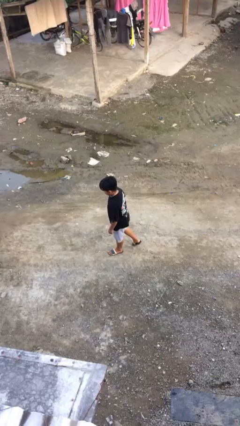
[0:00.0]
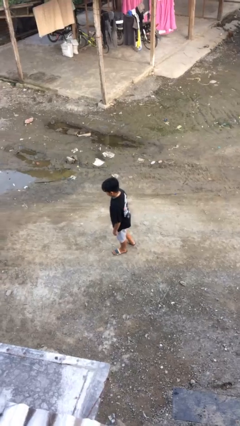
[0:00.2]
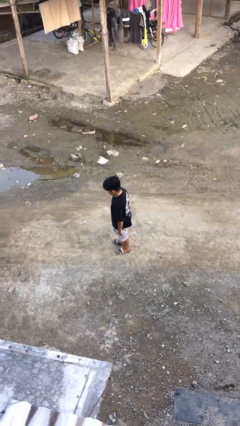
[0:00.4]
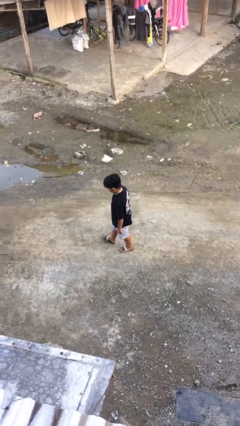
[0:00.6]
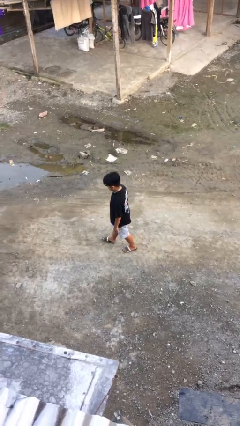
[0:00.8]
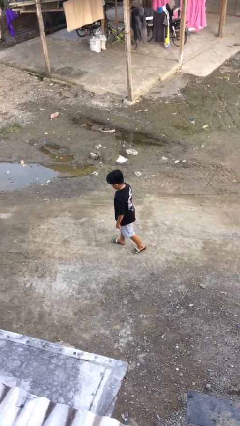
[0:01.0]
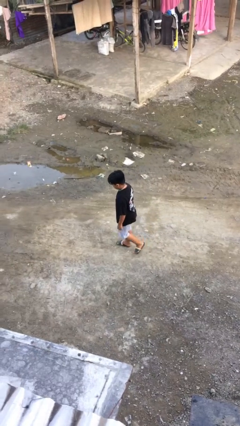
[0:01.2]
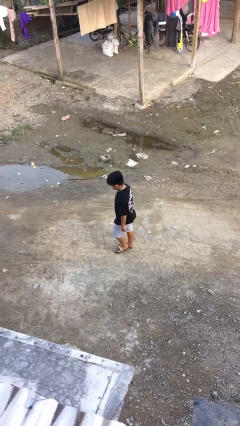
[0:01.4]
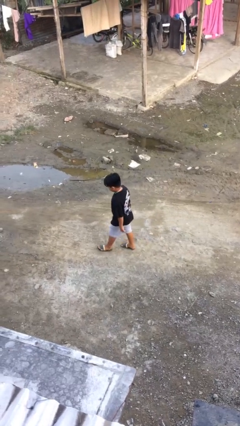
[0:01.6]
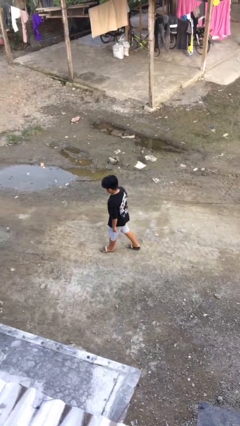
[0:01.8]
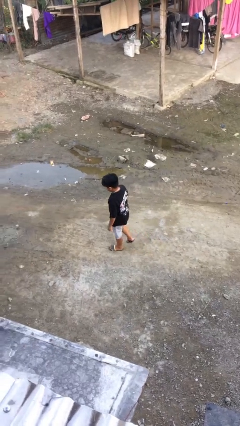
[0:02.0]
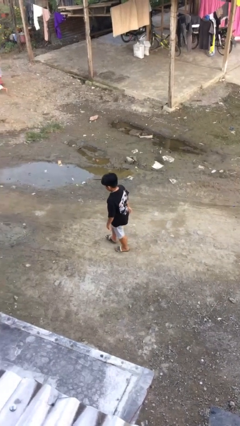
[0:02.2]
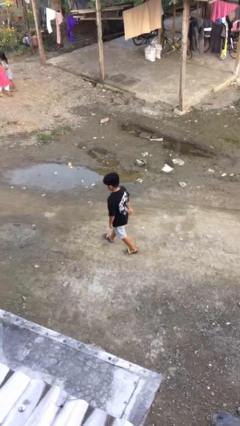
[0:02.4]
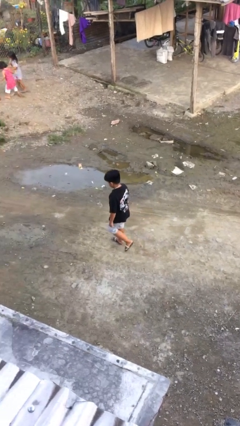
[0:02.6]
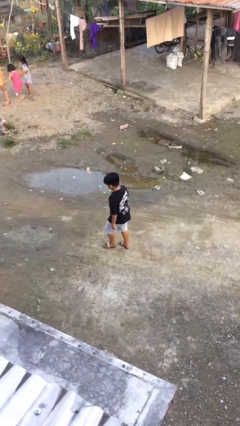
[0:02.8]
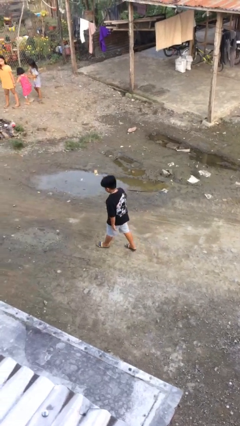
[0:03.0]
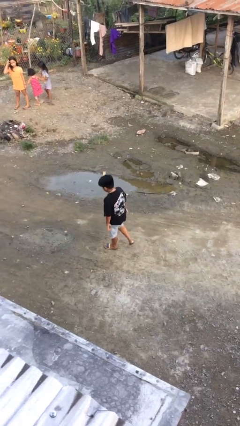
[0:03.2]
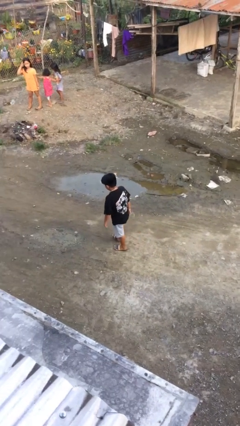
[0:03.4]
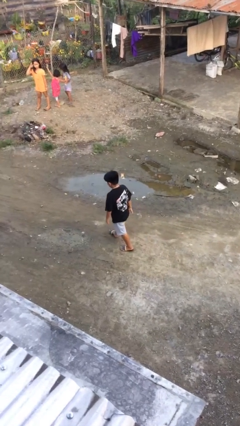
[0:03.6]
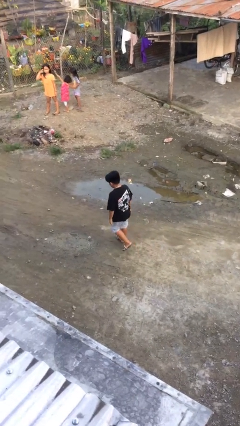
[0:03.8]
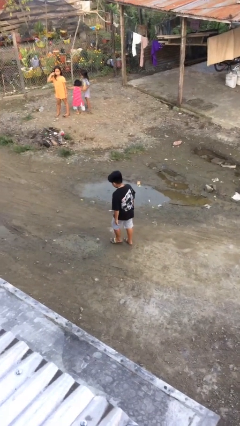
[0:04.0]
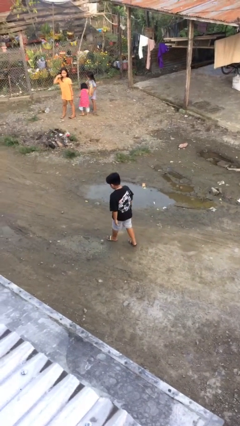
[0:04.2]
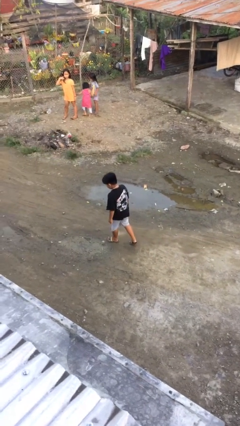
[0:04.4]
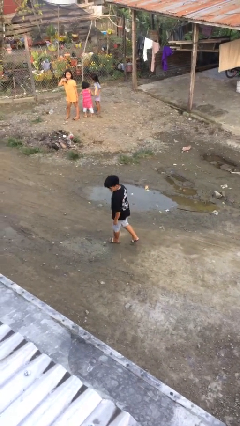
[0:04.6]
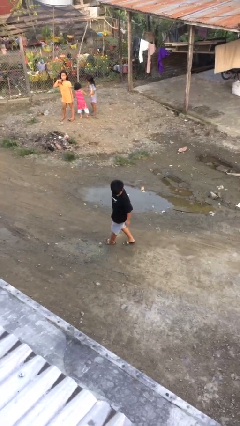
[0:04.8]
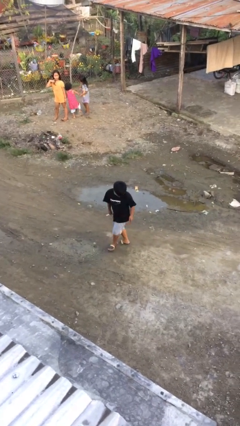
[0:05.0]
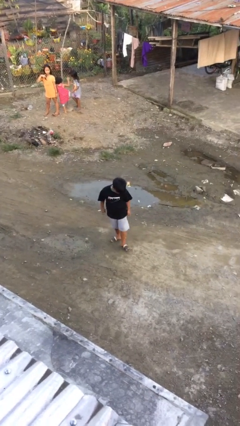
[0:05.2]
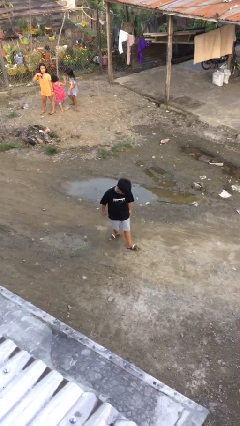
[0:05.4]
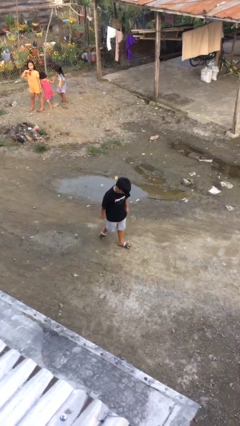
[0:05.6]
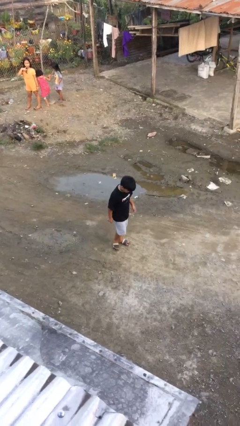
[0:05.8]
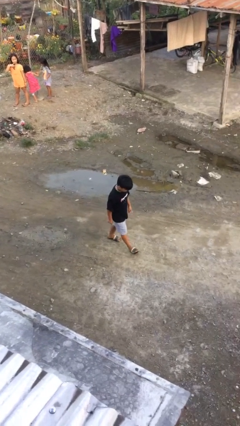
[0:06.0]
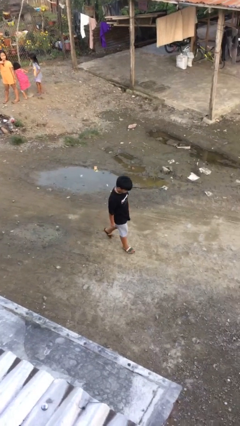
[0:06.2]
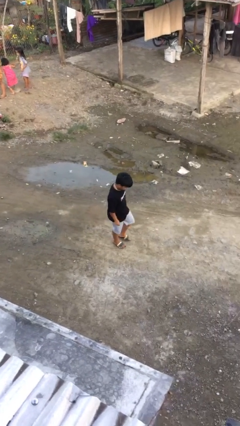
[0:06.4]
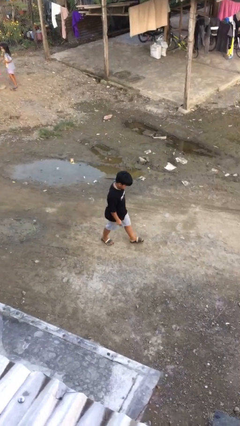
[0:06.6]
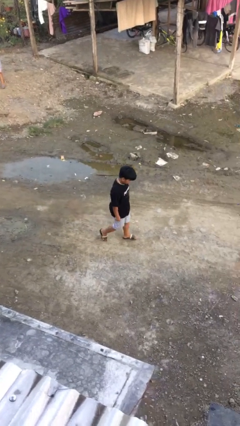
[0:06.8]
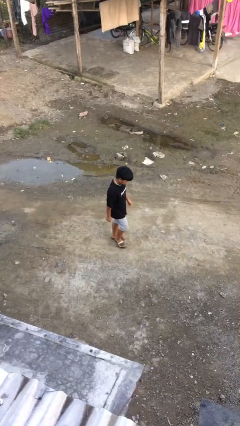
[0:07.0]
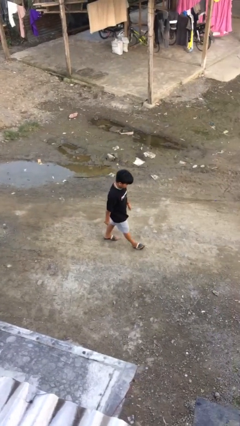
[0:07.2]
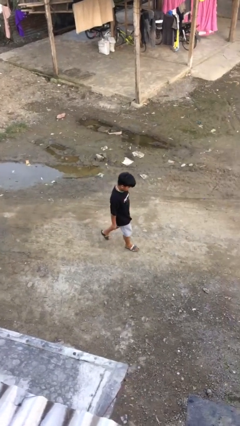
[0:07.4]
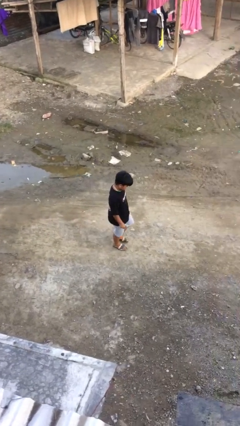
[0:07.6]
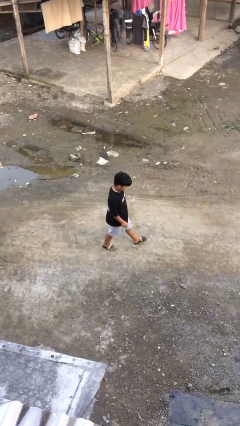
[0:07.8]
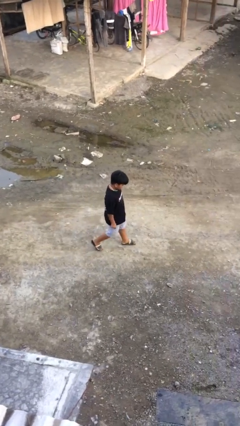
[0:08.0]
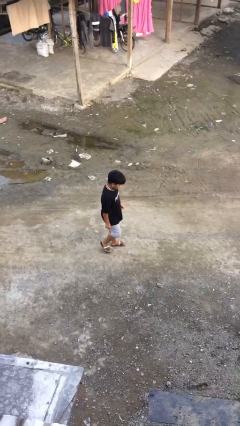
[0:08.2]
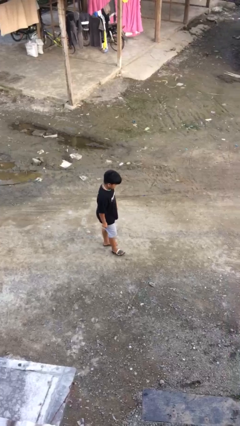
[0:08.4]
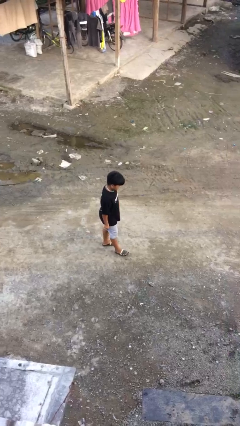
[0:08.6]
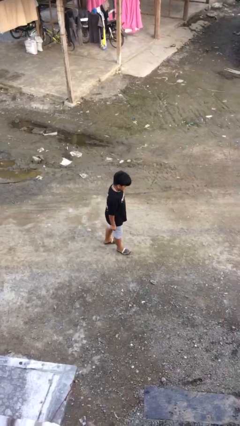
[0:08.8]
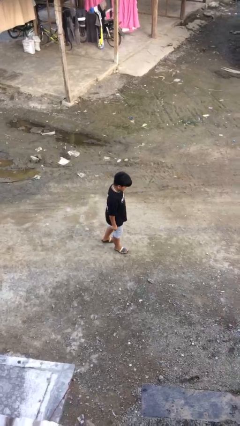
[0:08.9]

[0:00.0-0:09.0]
person walks

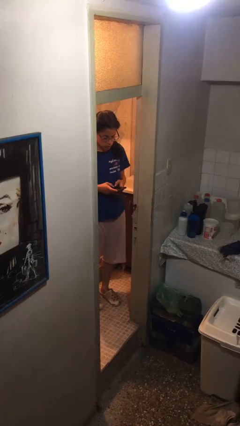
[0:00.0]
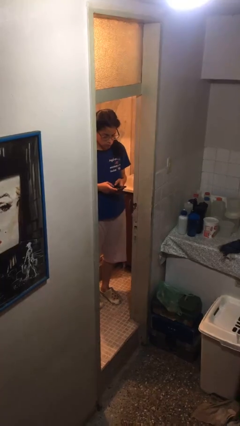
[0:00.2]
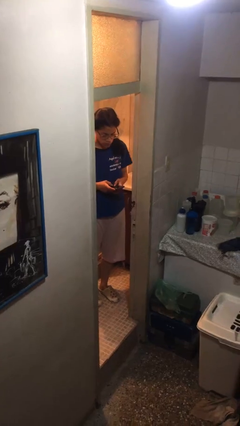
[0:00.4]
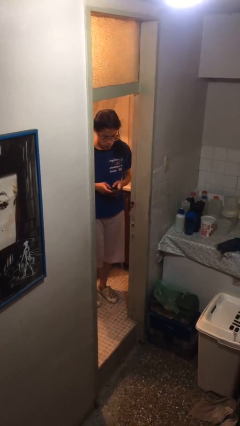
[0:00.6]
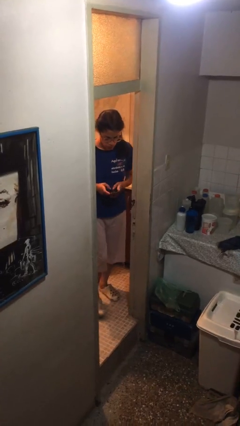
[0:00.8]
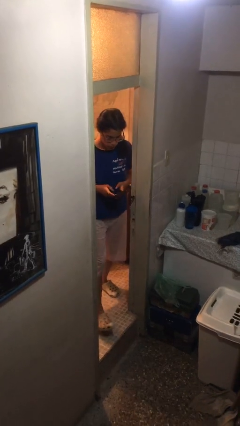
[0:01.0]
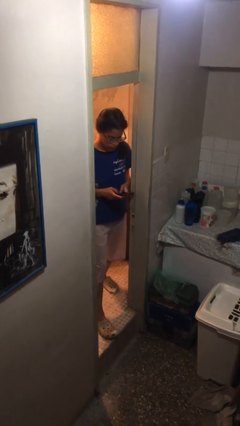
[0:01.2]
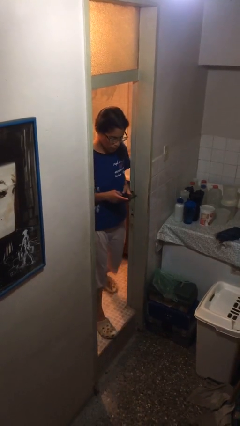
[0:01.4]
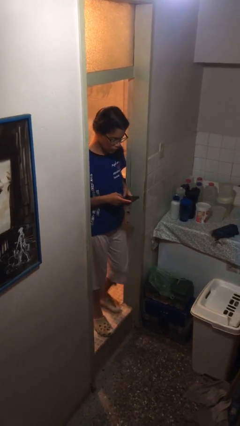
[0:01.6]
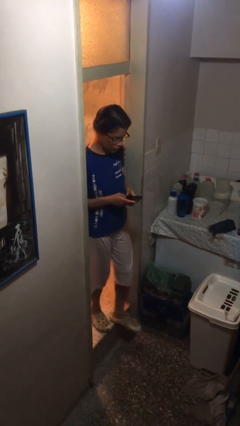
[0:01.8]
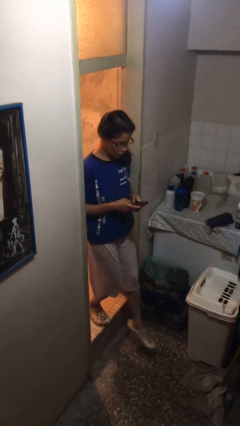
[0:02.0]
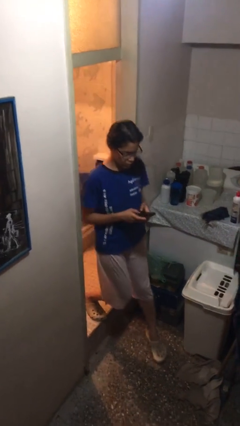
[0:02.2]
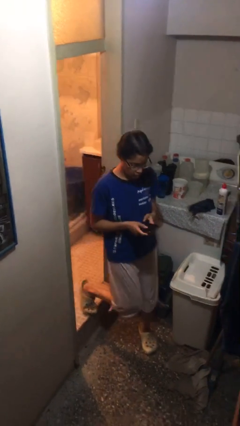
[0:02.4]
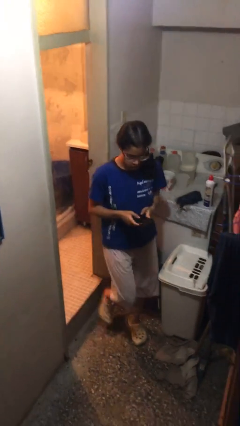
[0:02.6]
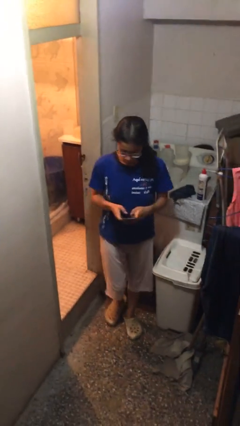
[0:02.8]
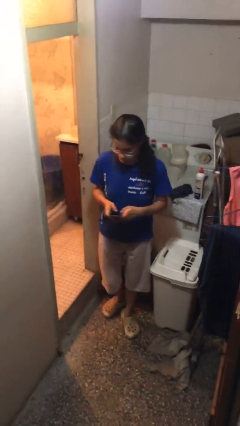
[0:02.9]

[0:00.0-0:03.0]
person enters scene through structure

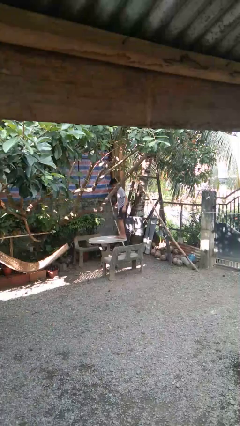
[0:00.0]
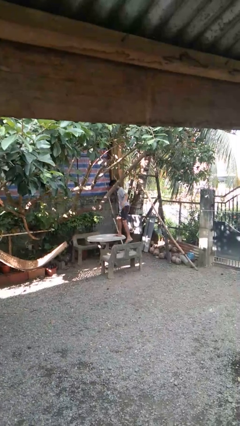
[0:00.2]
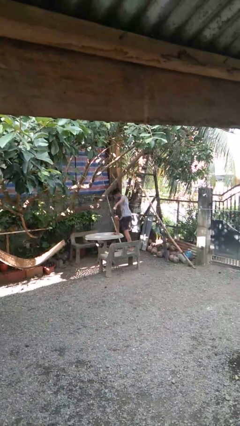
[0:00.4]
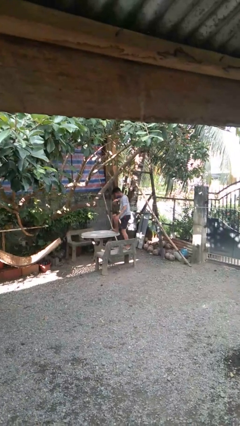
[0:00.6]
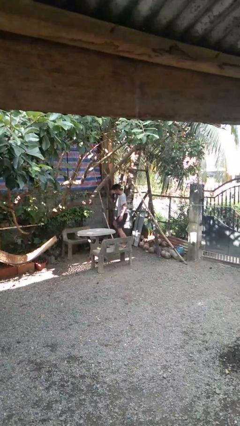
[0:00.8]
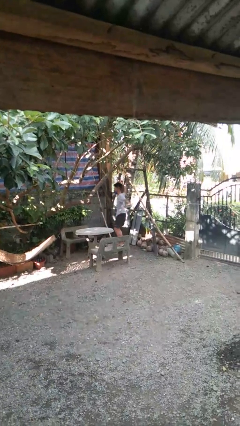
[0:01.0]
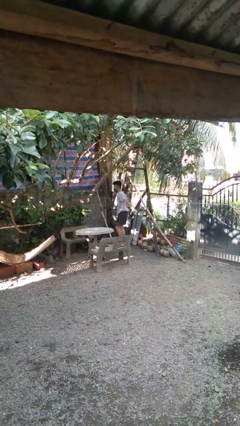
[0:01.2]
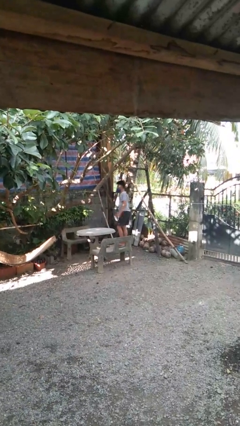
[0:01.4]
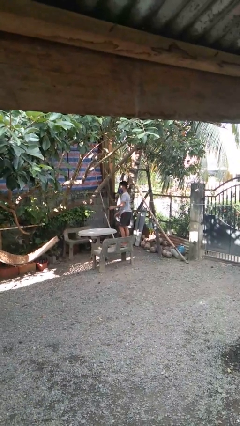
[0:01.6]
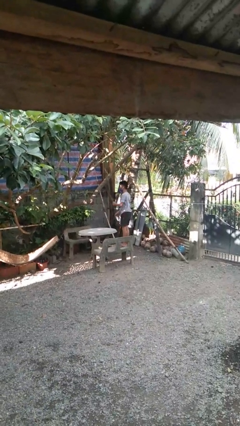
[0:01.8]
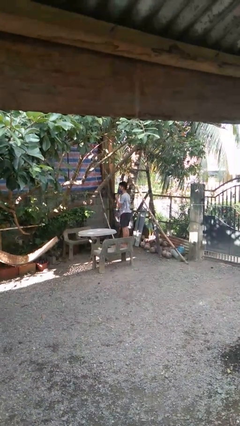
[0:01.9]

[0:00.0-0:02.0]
person climbs off table

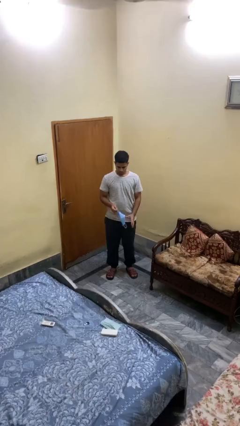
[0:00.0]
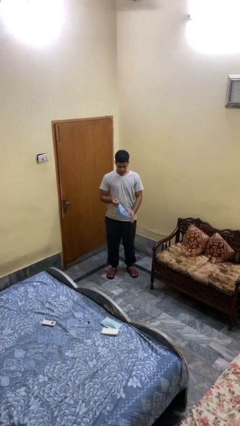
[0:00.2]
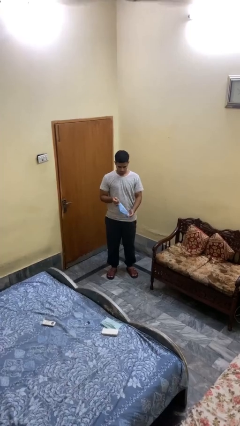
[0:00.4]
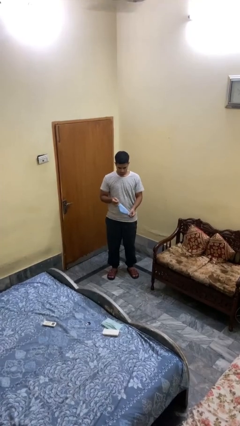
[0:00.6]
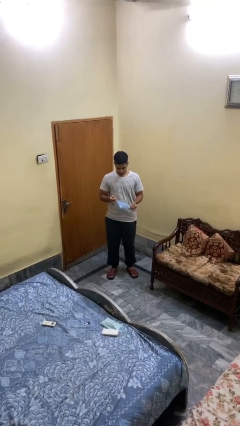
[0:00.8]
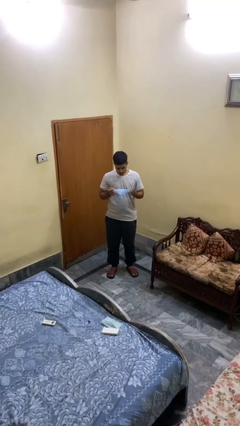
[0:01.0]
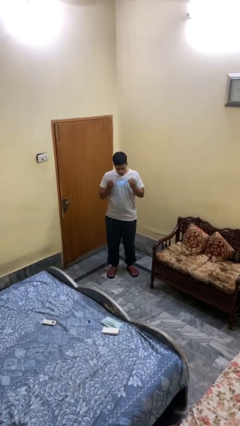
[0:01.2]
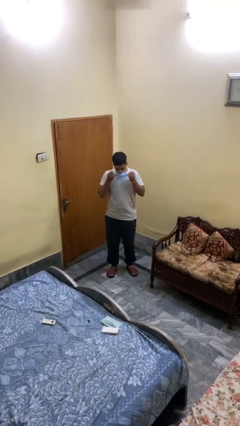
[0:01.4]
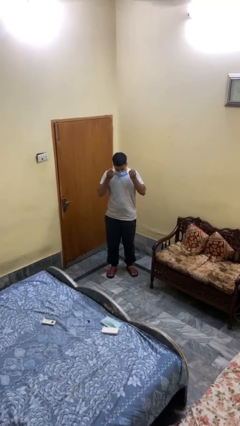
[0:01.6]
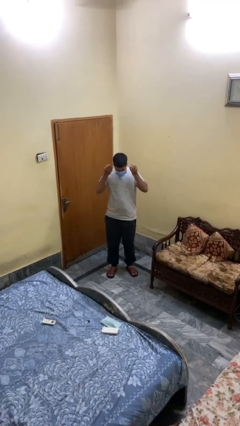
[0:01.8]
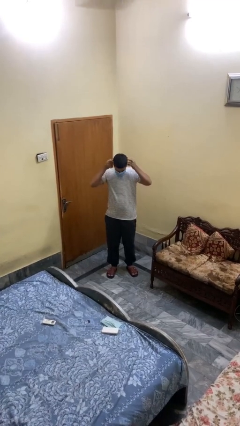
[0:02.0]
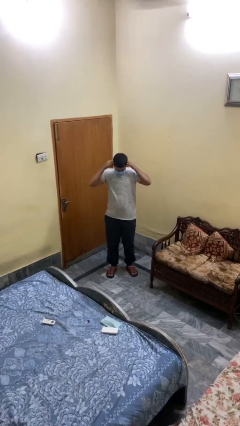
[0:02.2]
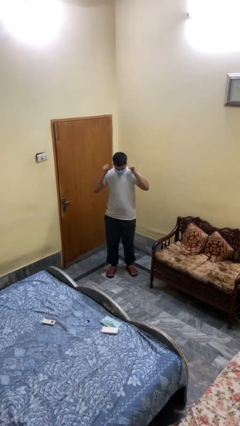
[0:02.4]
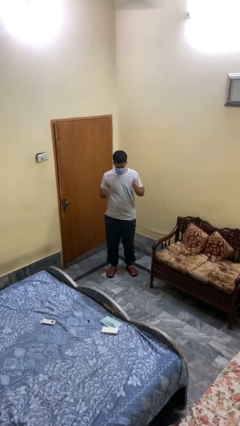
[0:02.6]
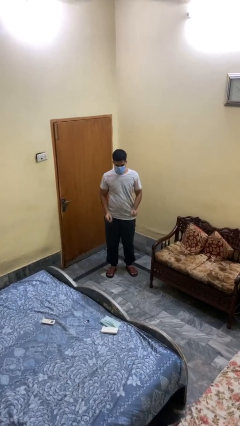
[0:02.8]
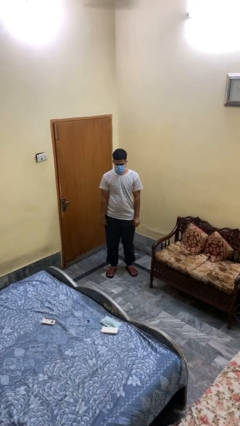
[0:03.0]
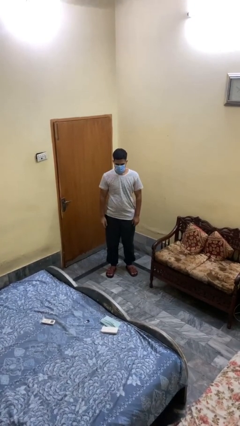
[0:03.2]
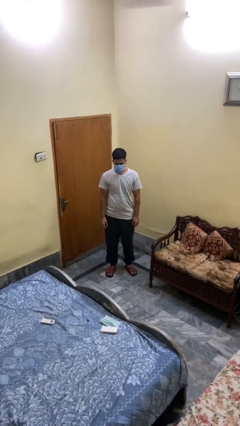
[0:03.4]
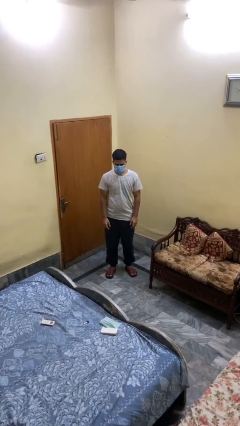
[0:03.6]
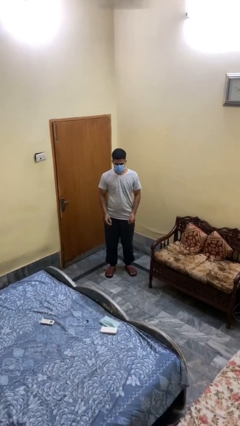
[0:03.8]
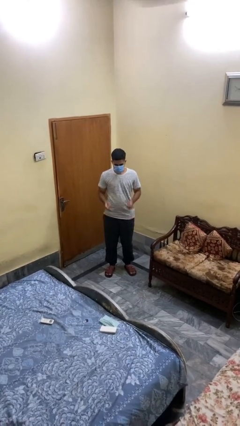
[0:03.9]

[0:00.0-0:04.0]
person puts on facemask
